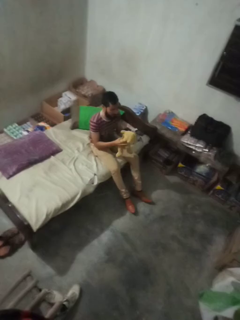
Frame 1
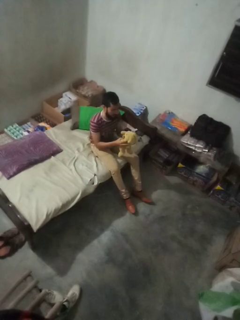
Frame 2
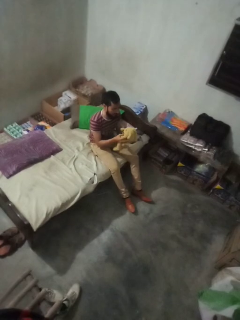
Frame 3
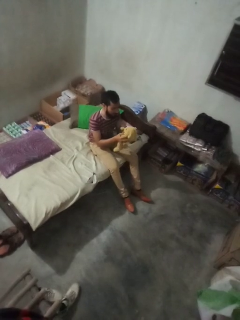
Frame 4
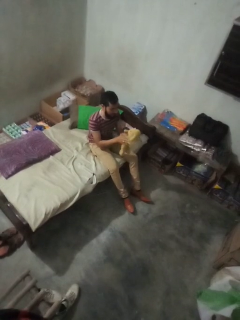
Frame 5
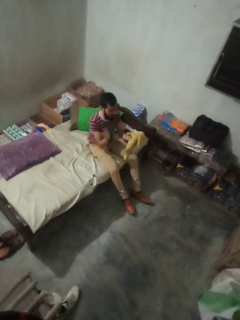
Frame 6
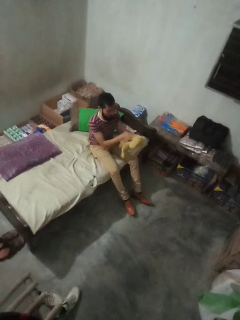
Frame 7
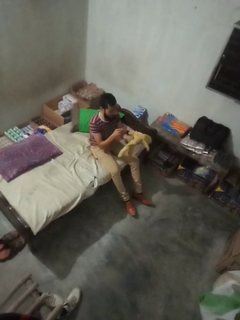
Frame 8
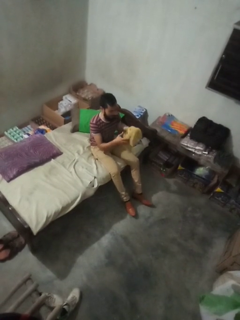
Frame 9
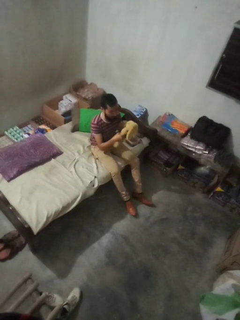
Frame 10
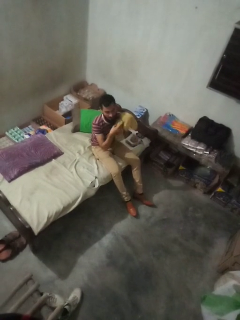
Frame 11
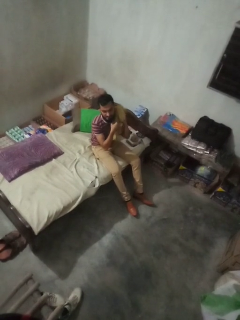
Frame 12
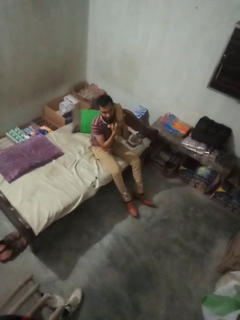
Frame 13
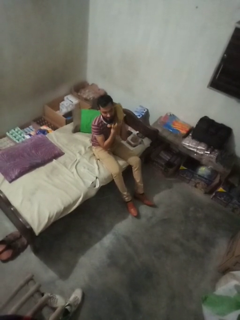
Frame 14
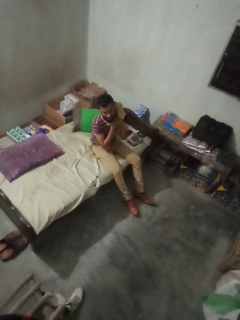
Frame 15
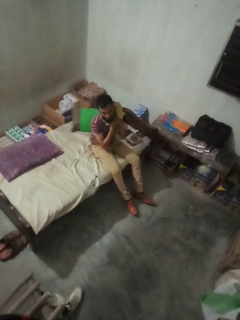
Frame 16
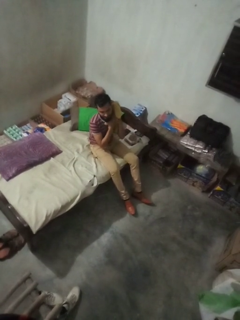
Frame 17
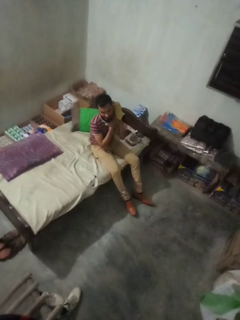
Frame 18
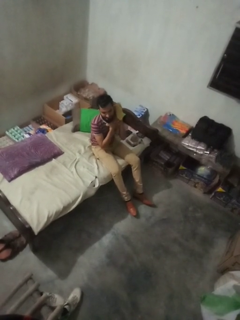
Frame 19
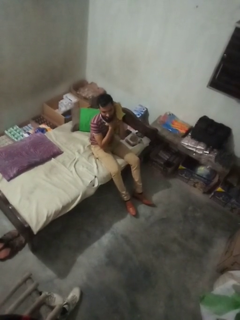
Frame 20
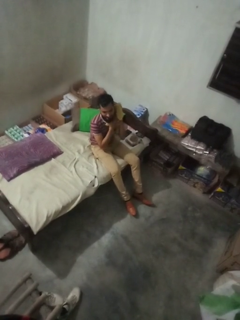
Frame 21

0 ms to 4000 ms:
person hugs stuffed animal

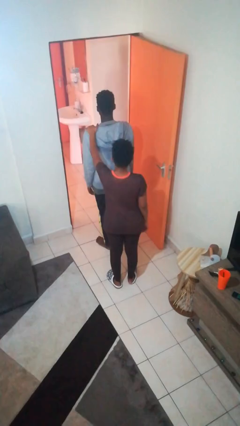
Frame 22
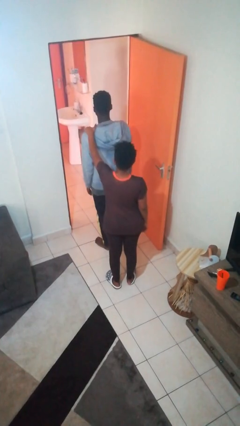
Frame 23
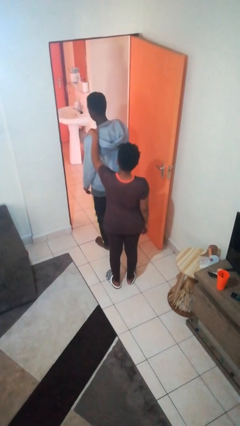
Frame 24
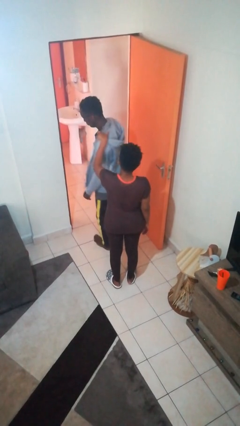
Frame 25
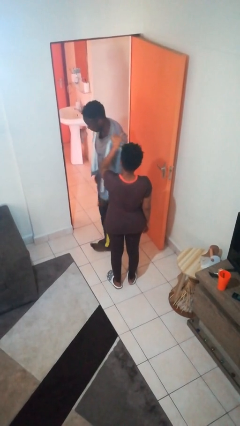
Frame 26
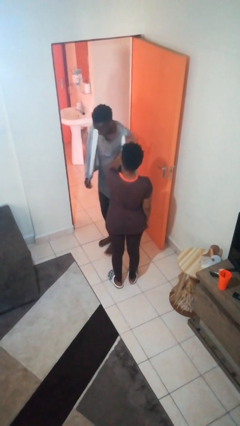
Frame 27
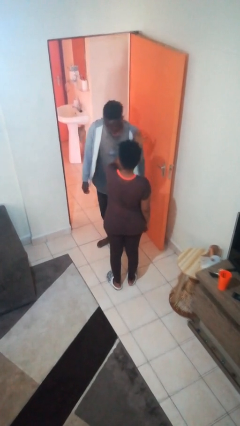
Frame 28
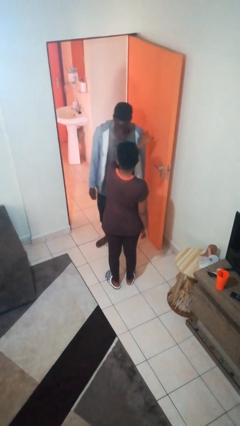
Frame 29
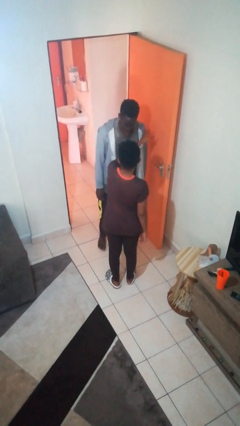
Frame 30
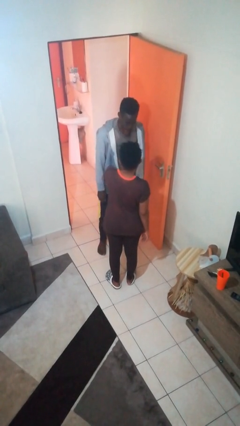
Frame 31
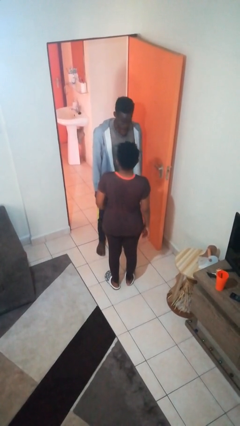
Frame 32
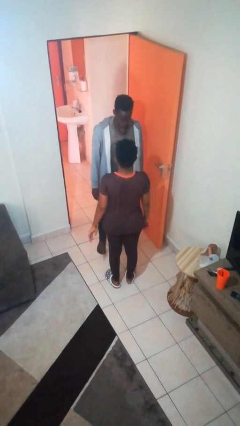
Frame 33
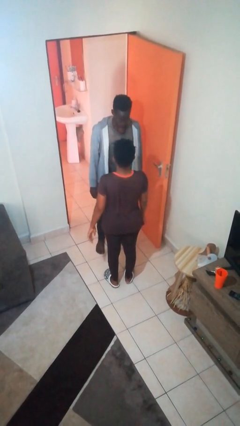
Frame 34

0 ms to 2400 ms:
person spins person around

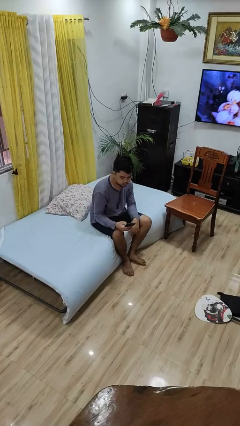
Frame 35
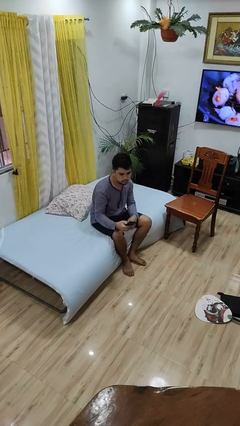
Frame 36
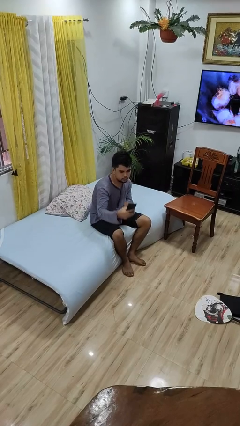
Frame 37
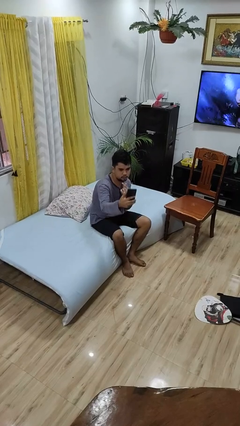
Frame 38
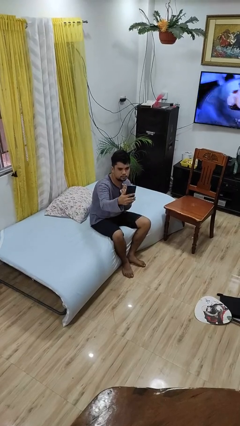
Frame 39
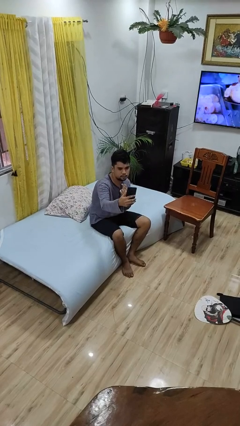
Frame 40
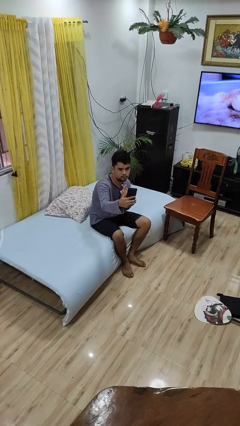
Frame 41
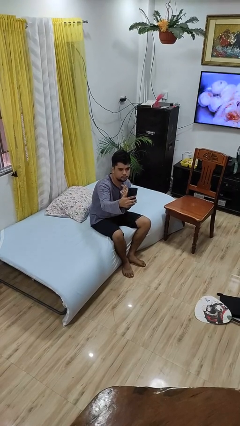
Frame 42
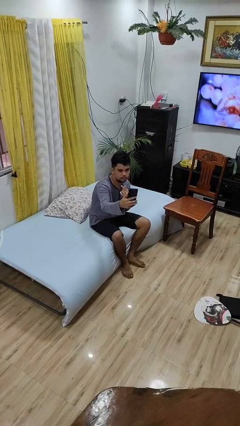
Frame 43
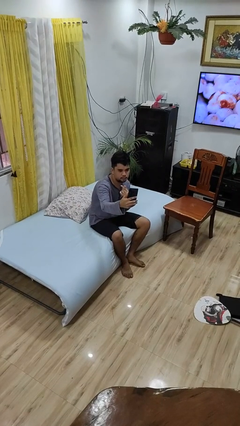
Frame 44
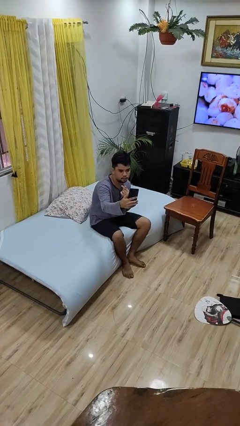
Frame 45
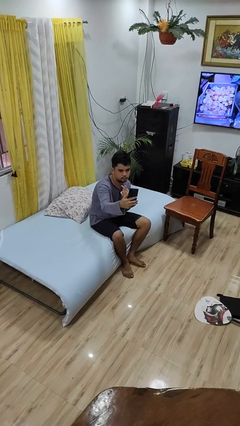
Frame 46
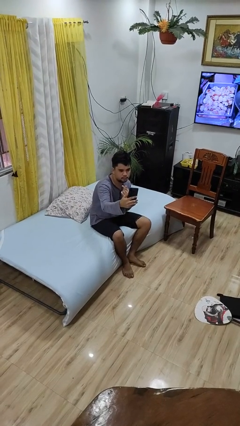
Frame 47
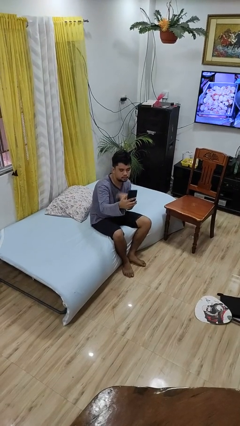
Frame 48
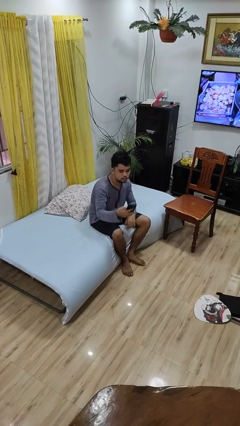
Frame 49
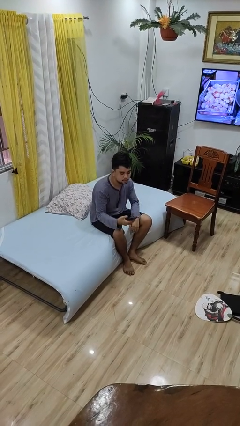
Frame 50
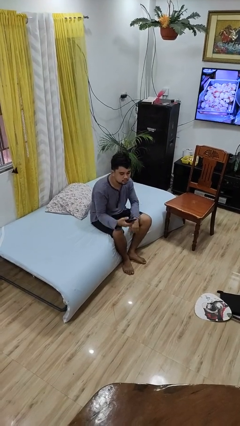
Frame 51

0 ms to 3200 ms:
person takes selfie

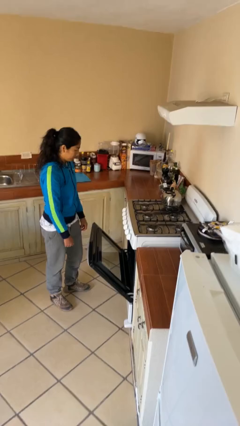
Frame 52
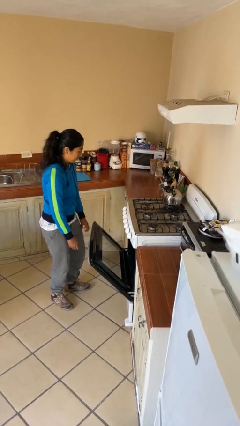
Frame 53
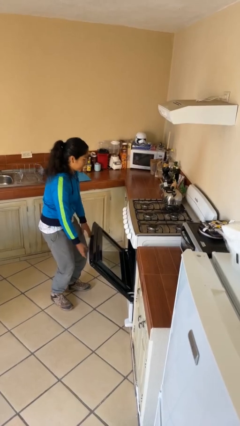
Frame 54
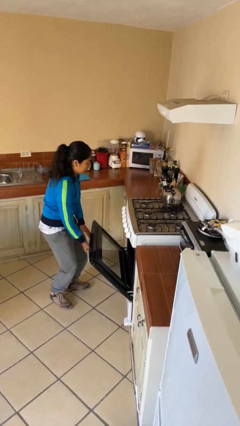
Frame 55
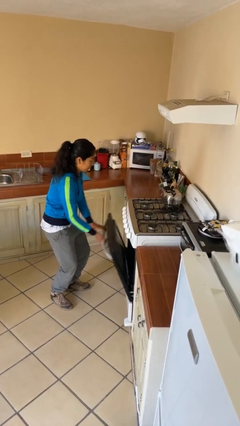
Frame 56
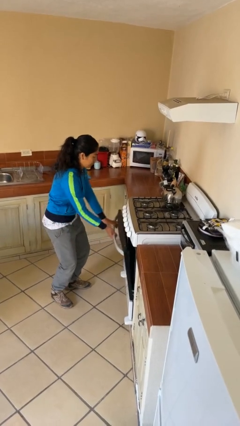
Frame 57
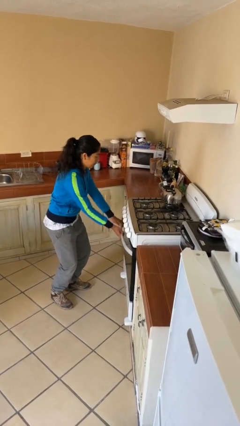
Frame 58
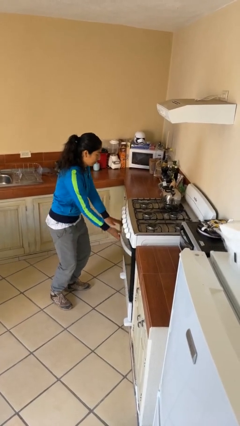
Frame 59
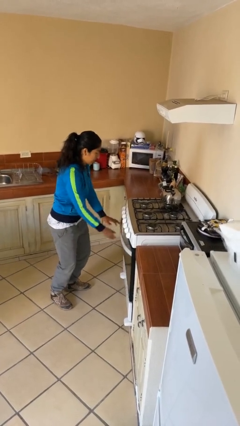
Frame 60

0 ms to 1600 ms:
person closes oven door

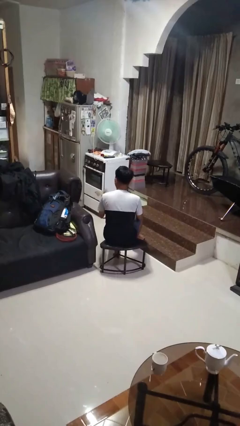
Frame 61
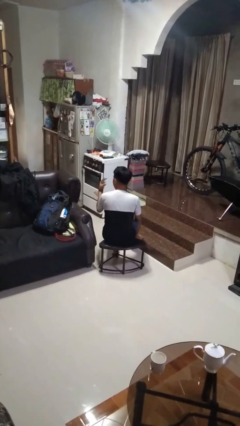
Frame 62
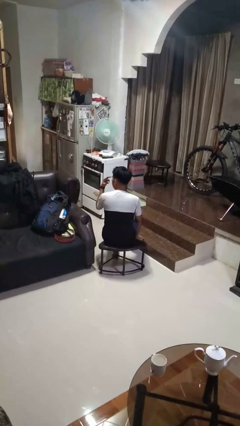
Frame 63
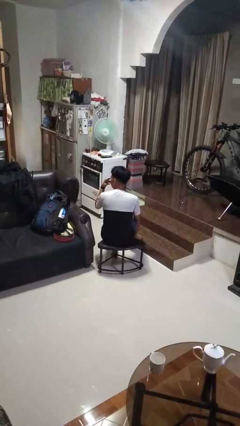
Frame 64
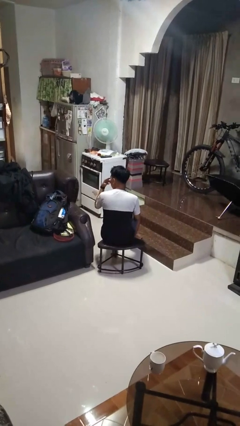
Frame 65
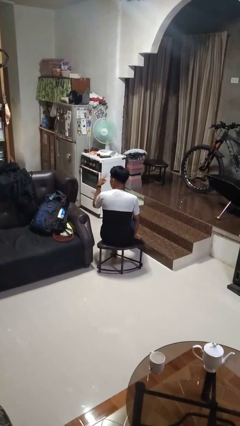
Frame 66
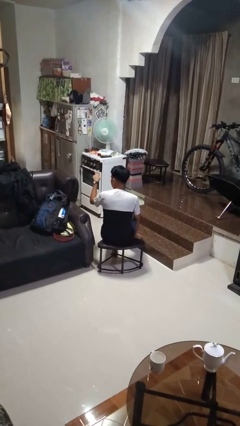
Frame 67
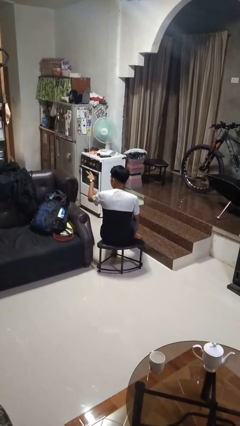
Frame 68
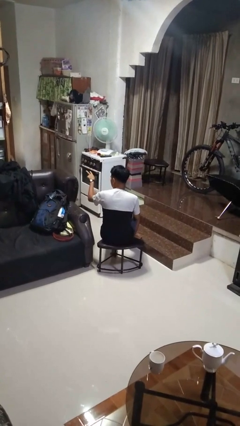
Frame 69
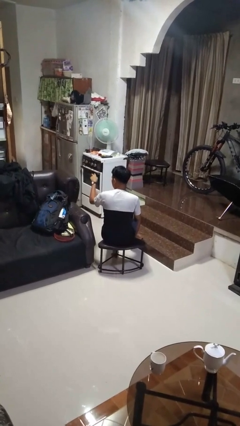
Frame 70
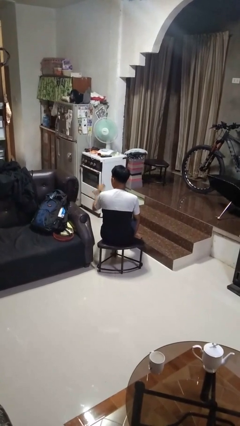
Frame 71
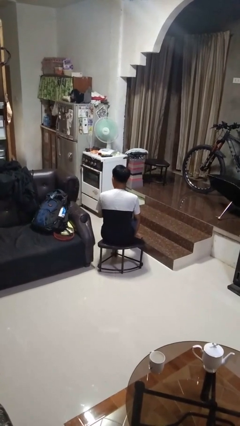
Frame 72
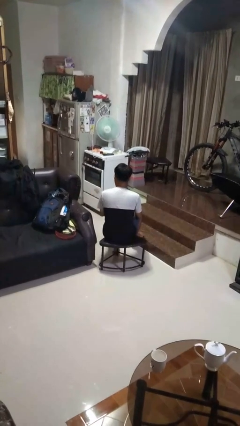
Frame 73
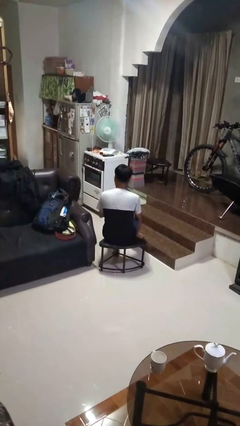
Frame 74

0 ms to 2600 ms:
person gestures watch closely

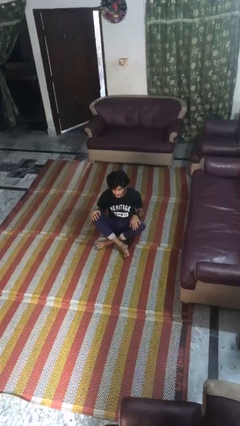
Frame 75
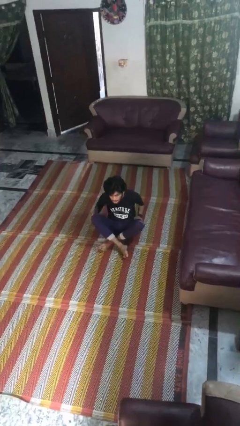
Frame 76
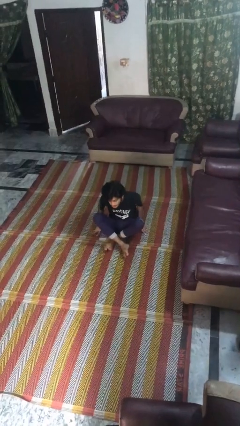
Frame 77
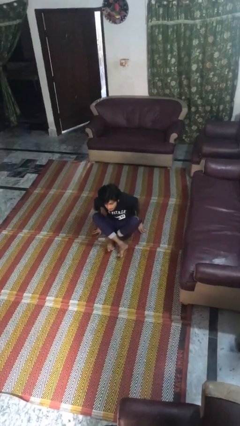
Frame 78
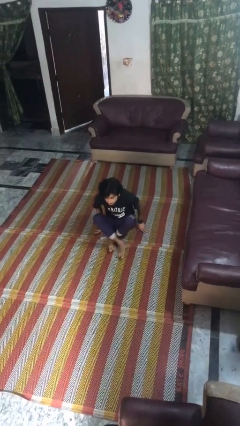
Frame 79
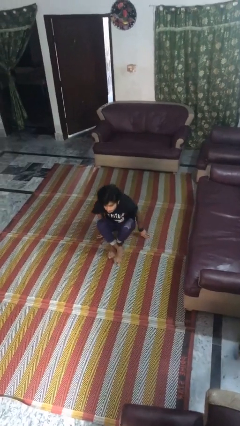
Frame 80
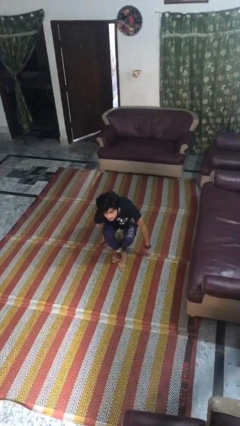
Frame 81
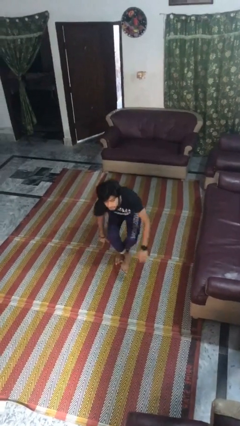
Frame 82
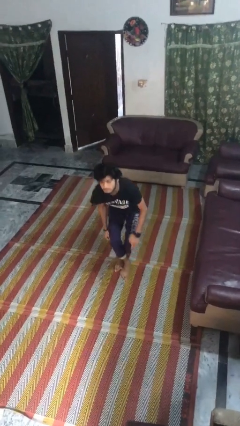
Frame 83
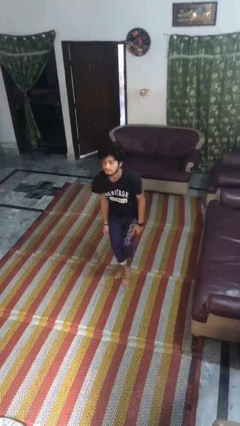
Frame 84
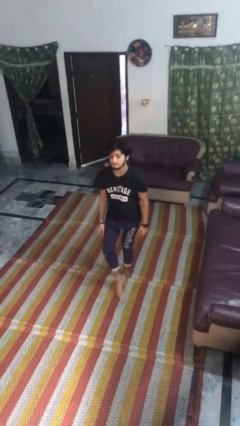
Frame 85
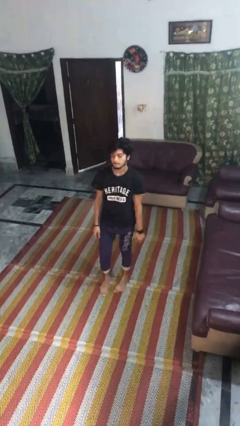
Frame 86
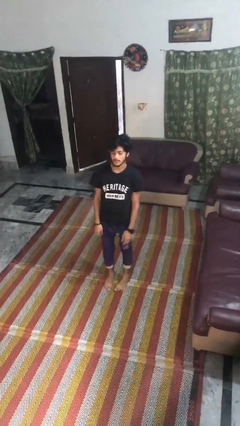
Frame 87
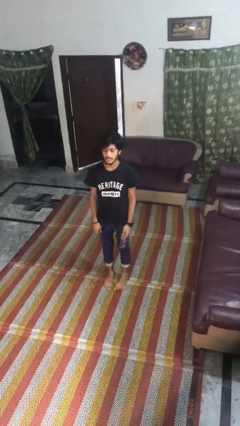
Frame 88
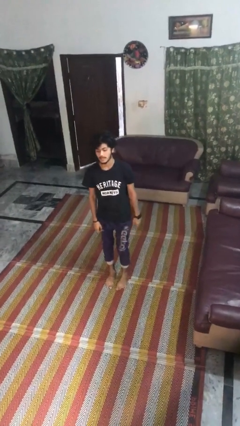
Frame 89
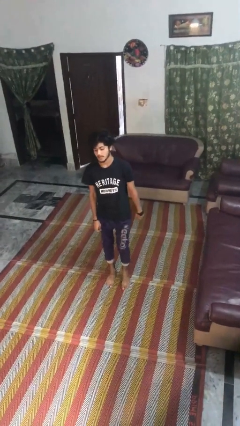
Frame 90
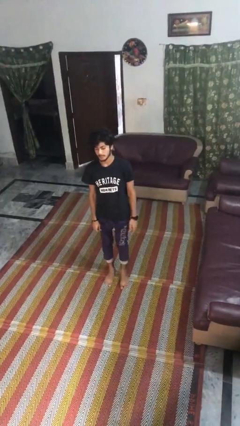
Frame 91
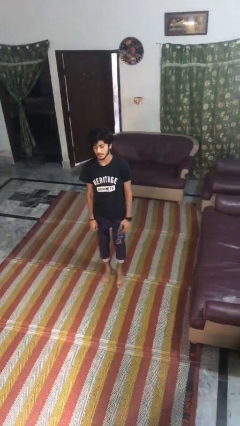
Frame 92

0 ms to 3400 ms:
person stands up from floor

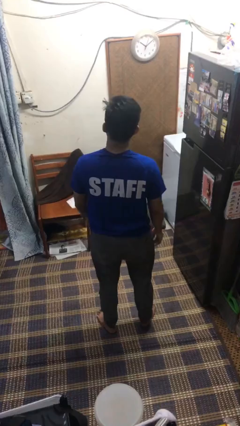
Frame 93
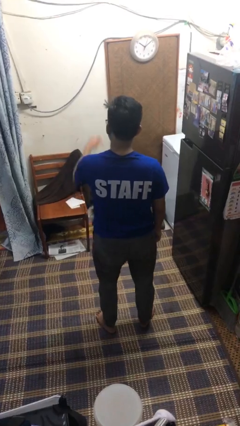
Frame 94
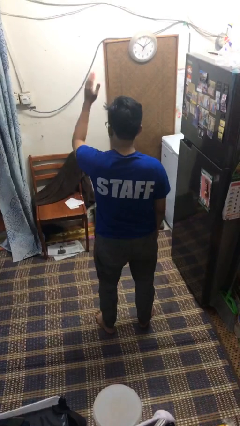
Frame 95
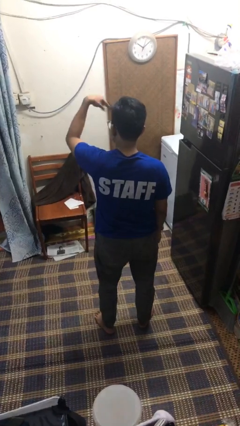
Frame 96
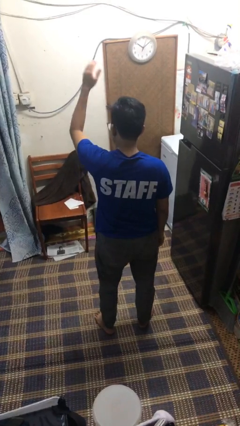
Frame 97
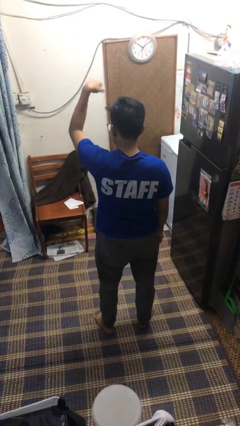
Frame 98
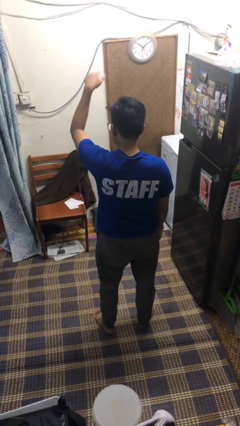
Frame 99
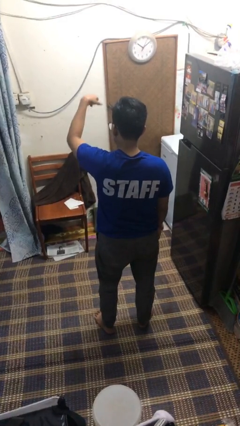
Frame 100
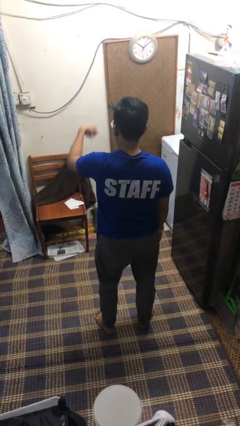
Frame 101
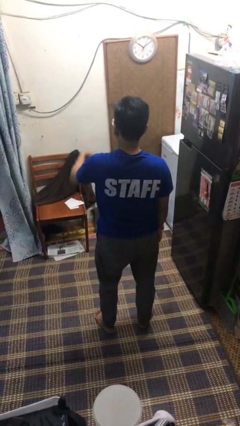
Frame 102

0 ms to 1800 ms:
person gestures come here
